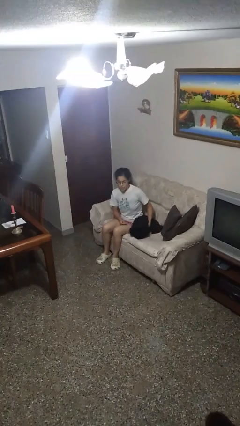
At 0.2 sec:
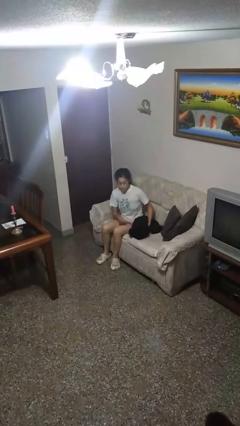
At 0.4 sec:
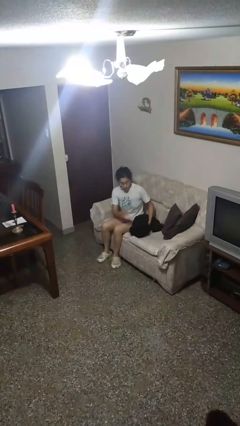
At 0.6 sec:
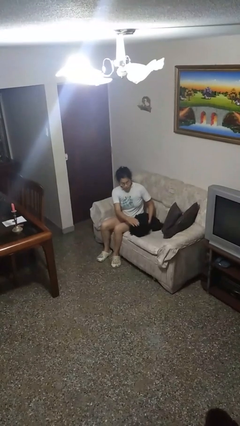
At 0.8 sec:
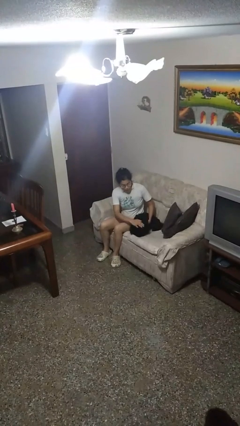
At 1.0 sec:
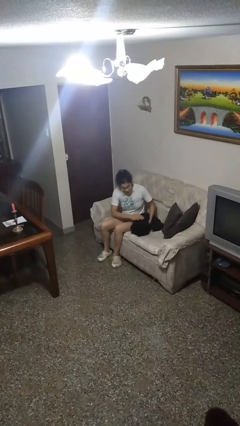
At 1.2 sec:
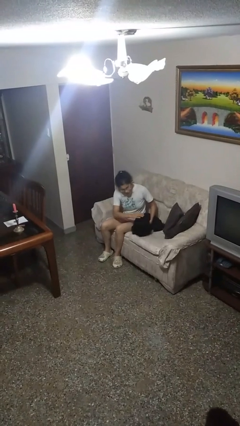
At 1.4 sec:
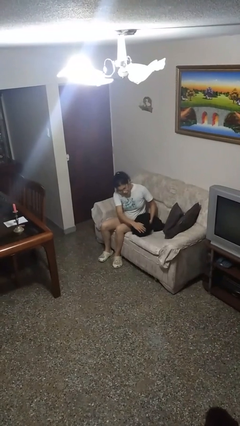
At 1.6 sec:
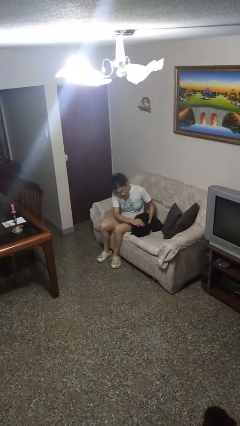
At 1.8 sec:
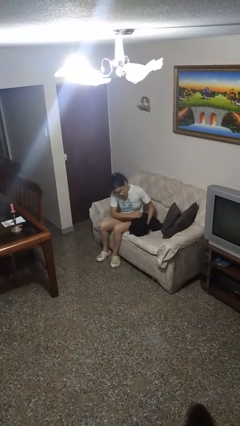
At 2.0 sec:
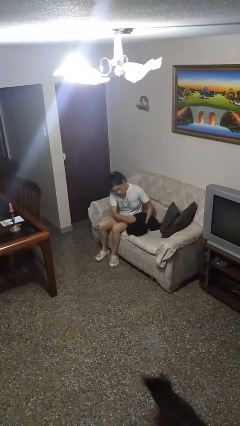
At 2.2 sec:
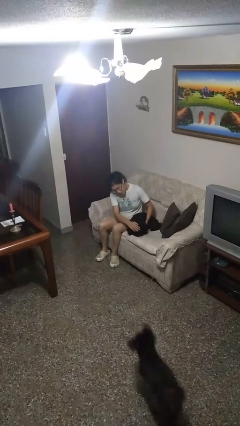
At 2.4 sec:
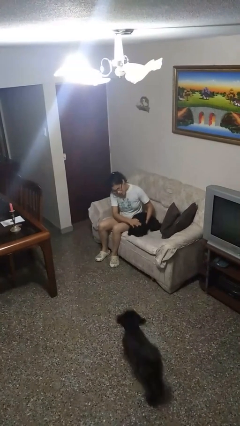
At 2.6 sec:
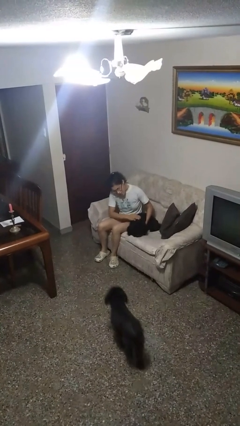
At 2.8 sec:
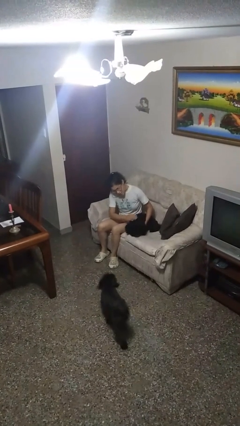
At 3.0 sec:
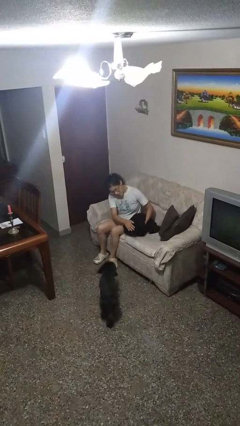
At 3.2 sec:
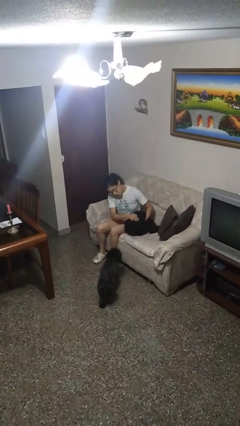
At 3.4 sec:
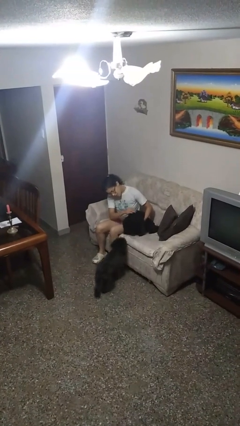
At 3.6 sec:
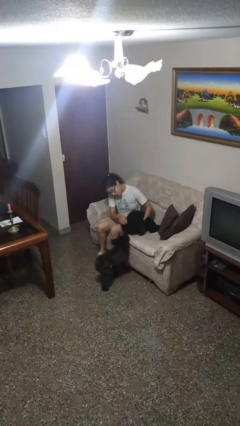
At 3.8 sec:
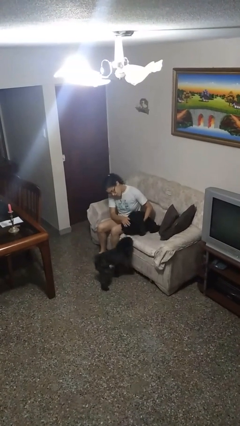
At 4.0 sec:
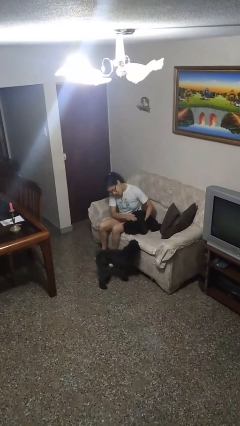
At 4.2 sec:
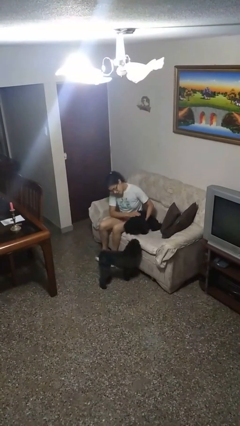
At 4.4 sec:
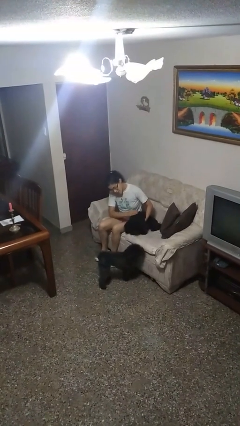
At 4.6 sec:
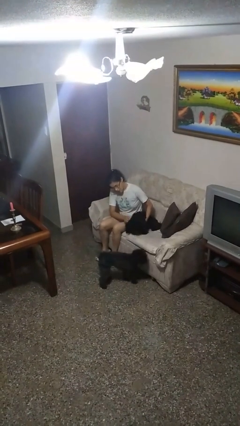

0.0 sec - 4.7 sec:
person pets dog

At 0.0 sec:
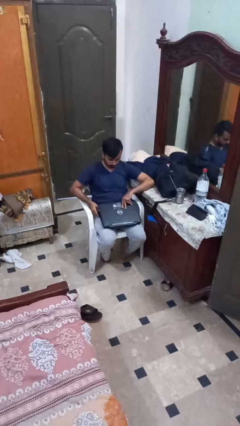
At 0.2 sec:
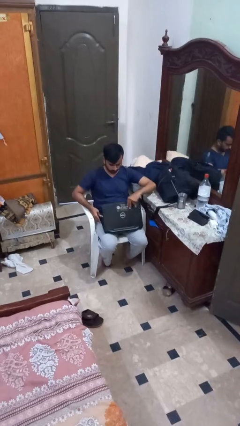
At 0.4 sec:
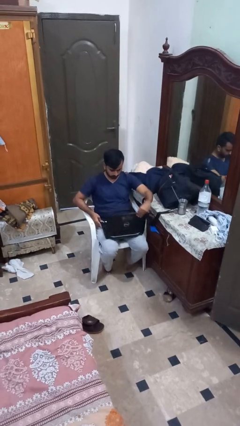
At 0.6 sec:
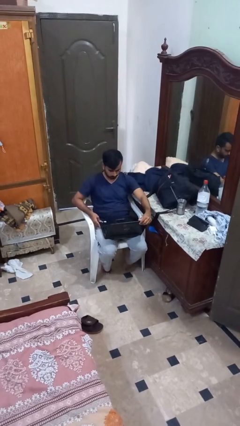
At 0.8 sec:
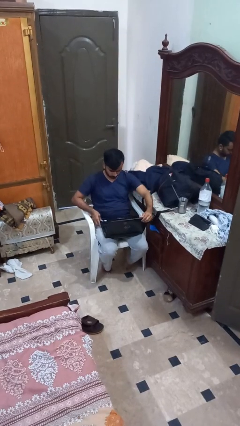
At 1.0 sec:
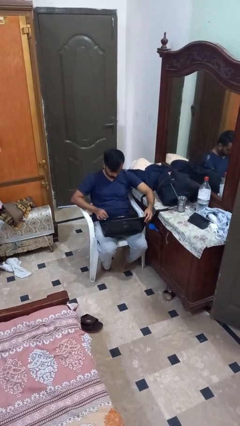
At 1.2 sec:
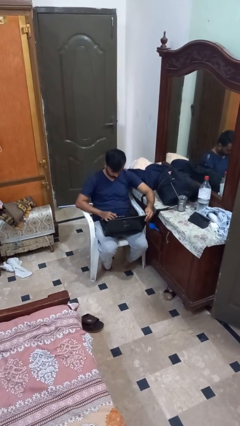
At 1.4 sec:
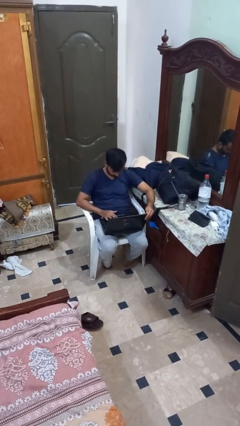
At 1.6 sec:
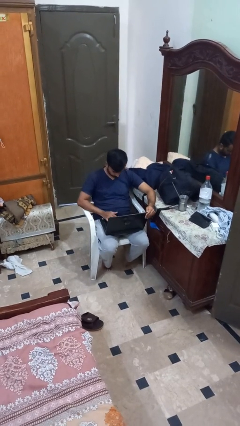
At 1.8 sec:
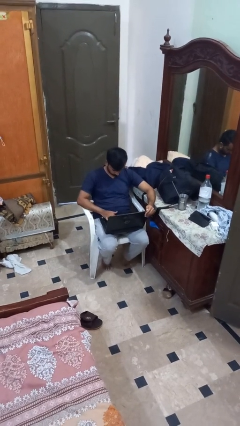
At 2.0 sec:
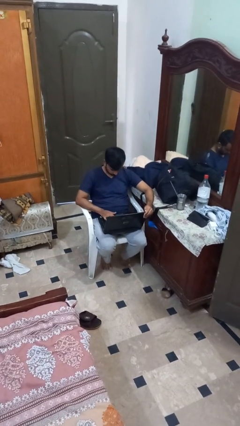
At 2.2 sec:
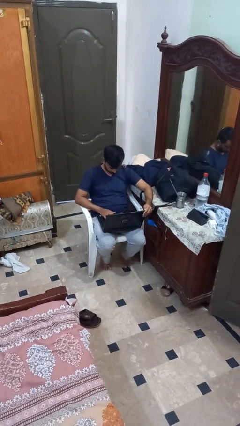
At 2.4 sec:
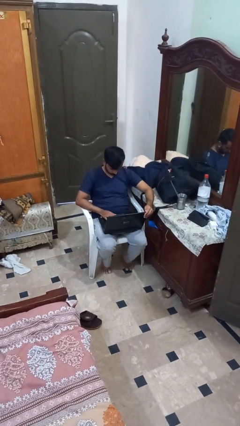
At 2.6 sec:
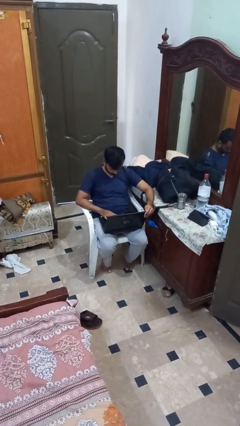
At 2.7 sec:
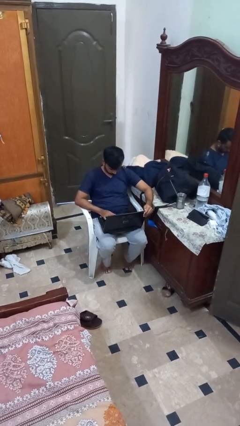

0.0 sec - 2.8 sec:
person opens laptop

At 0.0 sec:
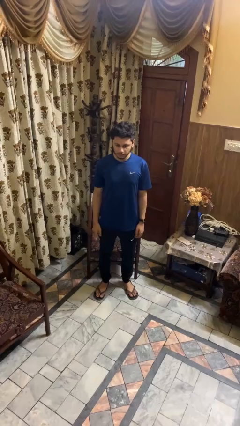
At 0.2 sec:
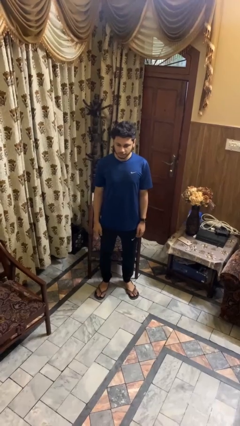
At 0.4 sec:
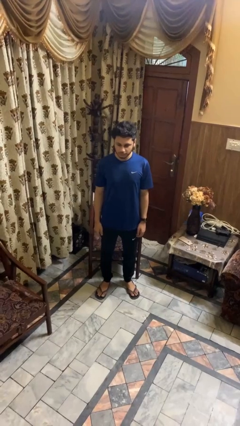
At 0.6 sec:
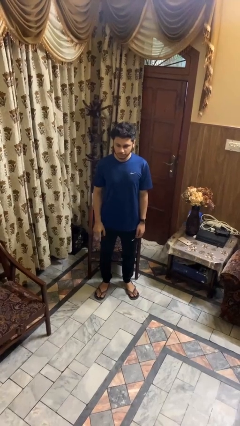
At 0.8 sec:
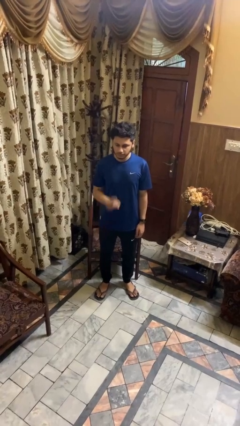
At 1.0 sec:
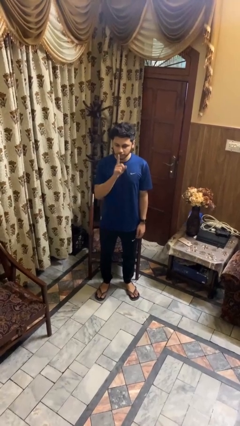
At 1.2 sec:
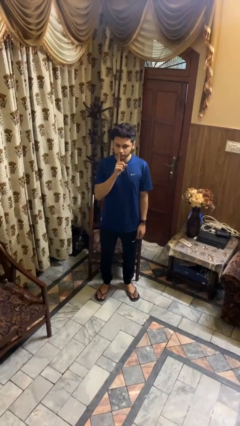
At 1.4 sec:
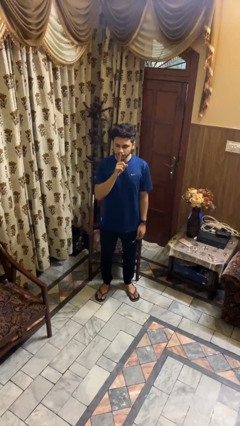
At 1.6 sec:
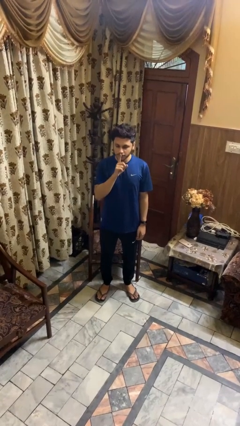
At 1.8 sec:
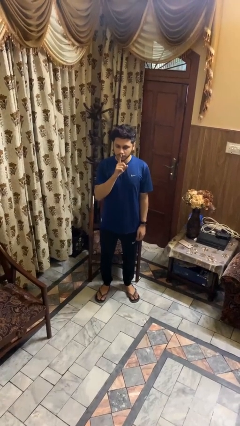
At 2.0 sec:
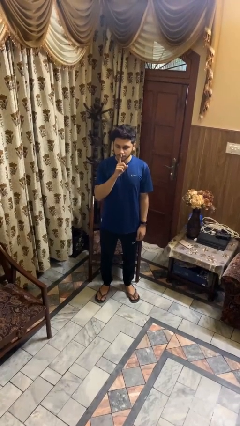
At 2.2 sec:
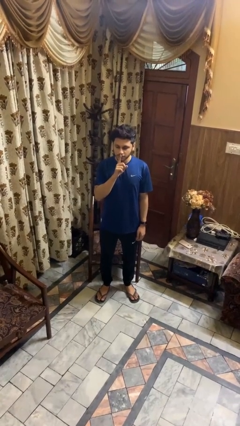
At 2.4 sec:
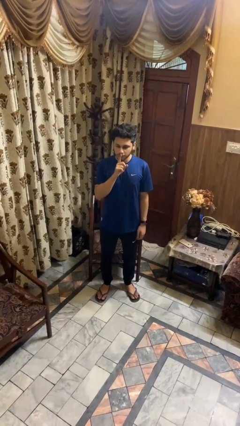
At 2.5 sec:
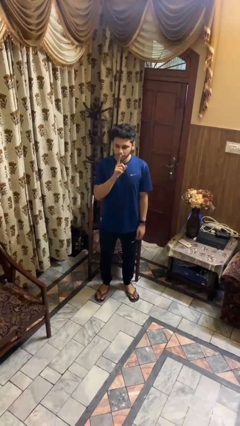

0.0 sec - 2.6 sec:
person gestures be quiet

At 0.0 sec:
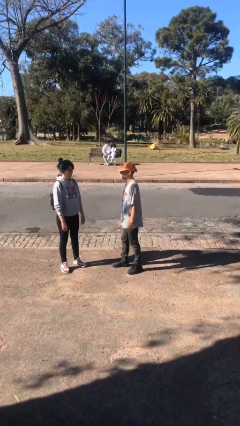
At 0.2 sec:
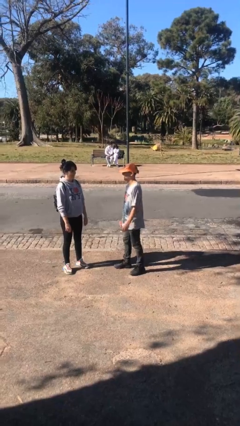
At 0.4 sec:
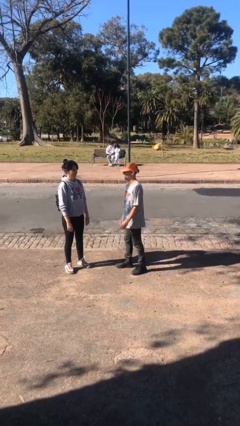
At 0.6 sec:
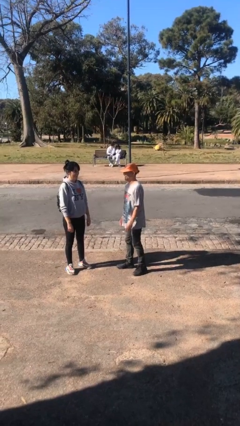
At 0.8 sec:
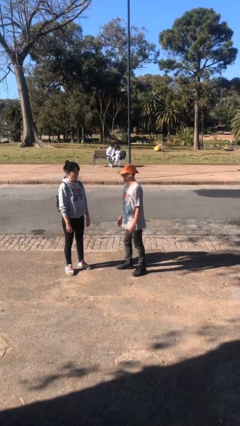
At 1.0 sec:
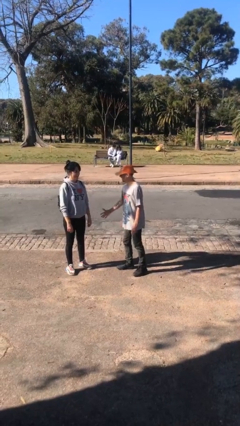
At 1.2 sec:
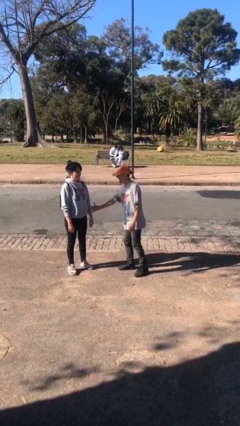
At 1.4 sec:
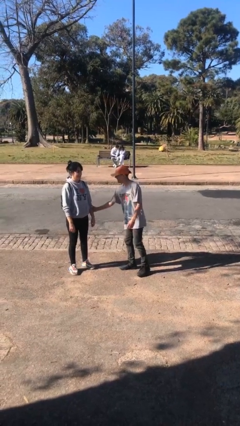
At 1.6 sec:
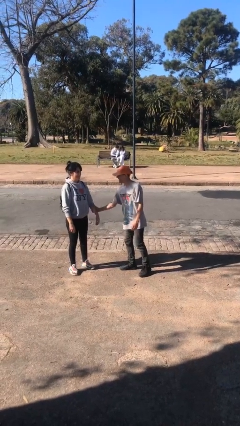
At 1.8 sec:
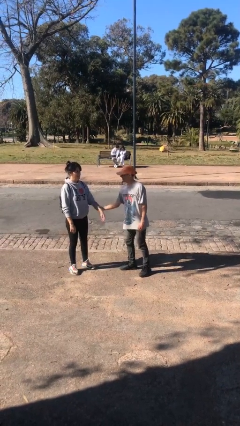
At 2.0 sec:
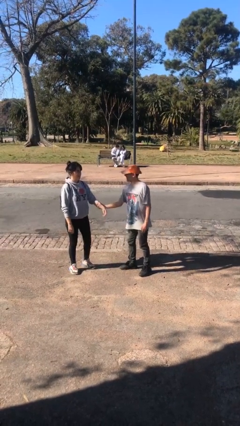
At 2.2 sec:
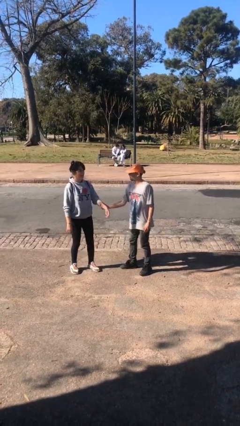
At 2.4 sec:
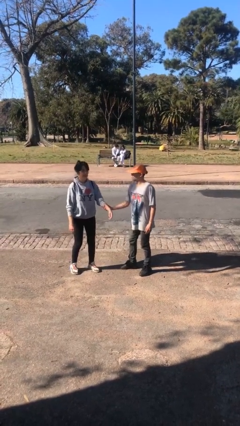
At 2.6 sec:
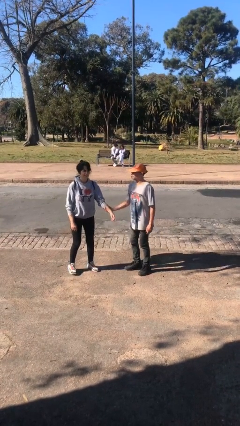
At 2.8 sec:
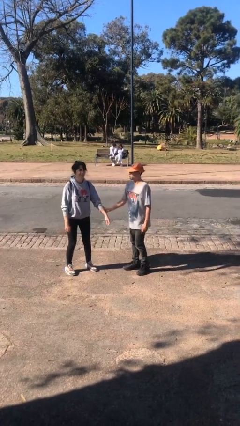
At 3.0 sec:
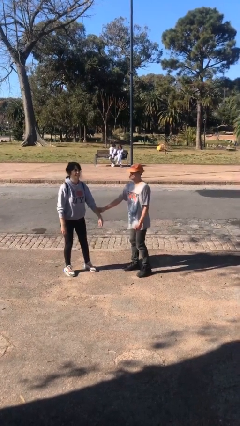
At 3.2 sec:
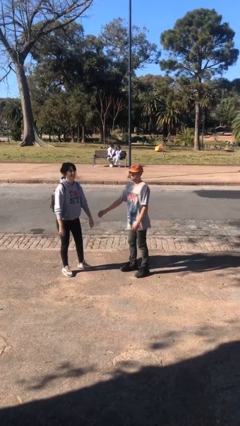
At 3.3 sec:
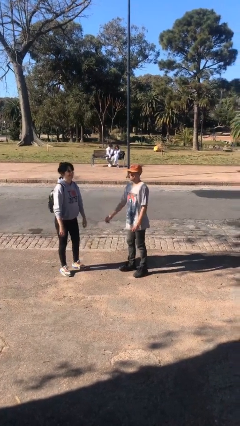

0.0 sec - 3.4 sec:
person grabs person by forearm

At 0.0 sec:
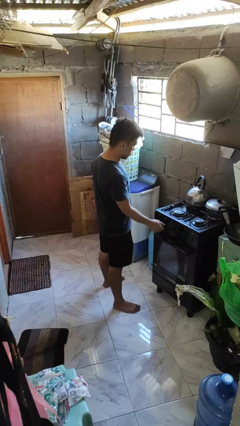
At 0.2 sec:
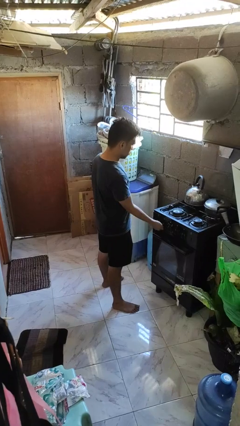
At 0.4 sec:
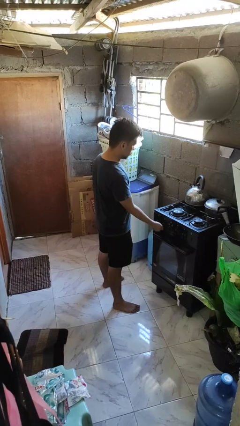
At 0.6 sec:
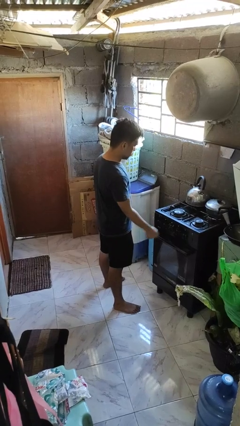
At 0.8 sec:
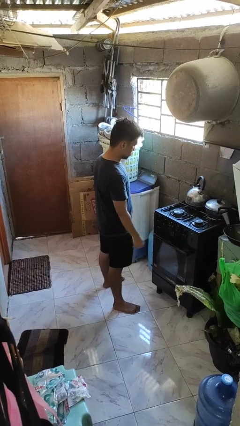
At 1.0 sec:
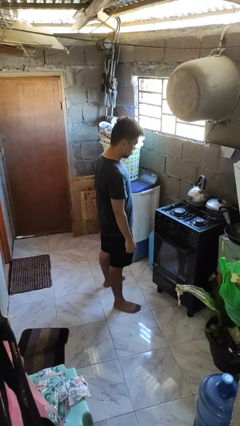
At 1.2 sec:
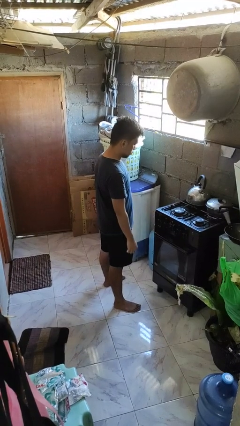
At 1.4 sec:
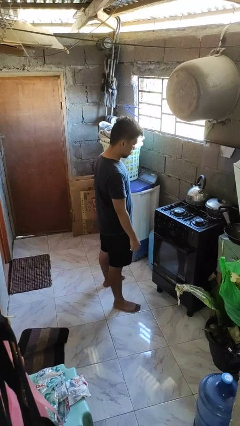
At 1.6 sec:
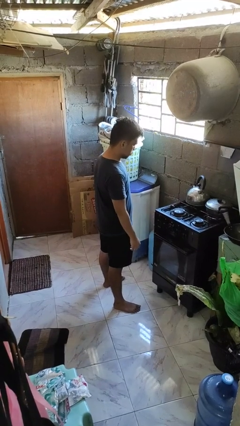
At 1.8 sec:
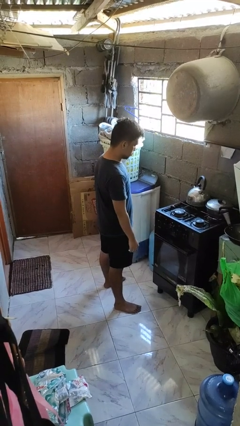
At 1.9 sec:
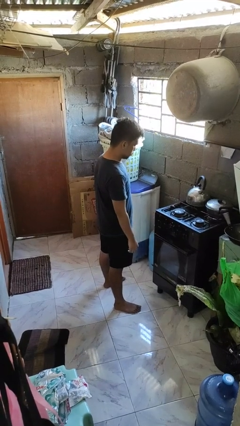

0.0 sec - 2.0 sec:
person turns off stovetop

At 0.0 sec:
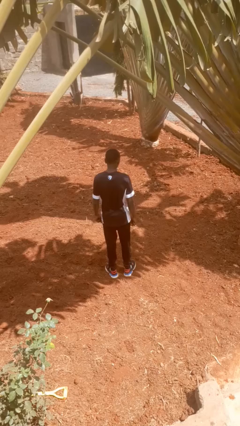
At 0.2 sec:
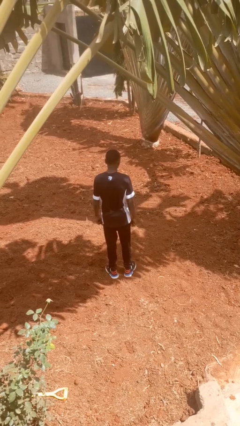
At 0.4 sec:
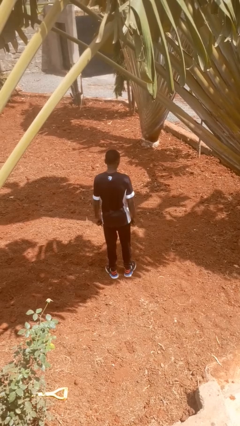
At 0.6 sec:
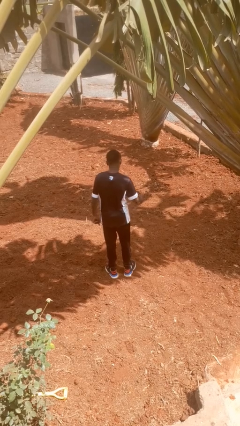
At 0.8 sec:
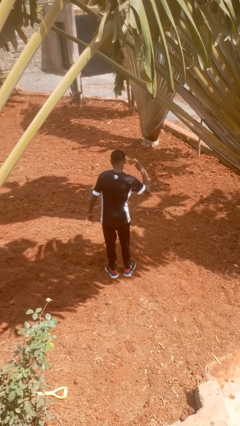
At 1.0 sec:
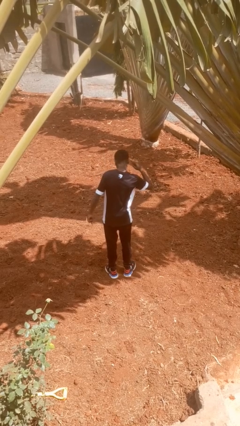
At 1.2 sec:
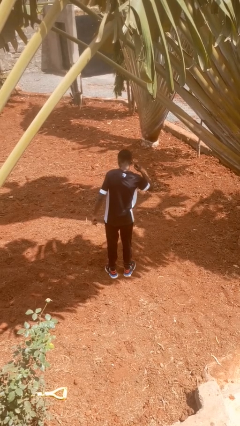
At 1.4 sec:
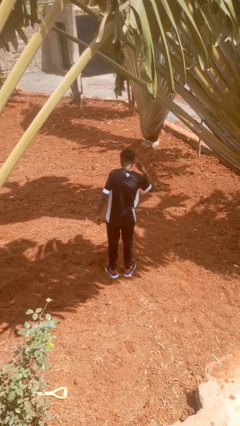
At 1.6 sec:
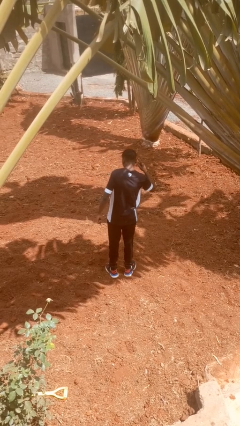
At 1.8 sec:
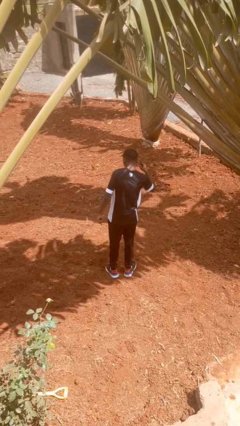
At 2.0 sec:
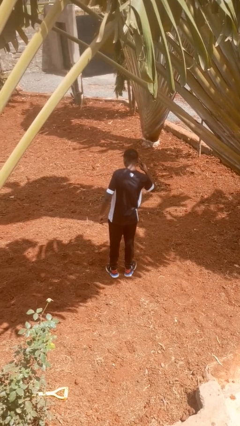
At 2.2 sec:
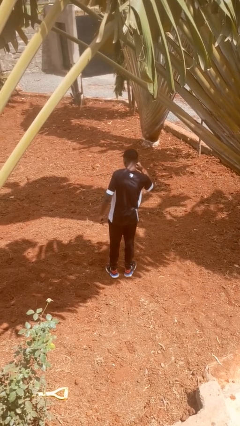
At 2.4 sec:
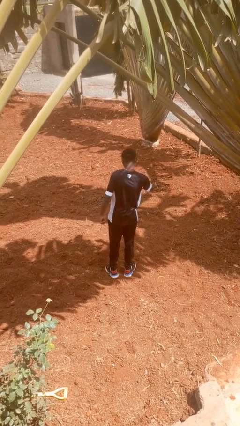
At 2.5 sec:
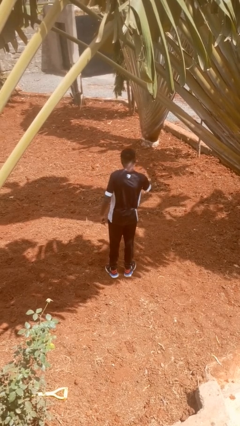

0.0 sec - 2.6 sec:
person gestures listen closely
